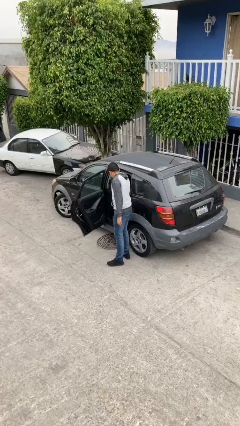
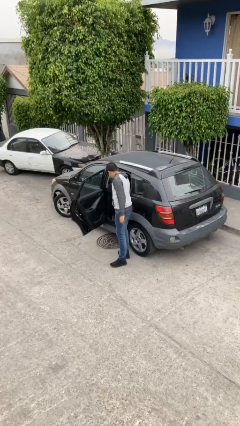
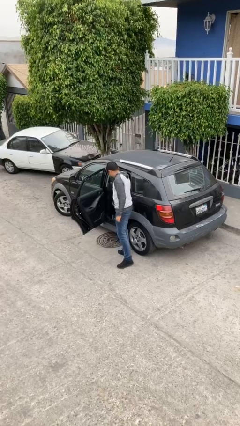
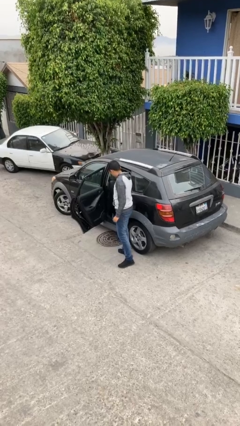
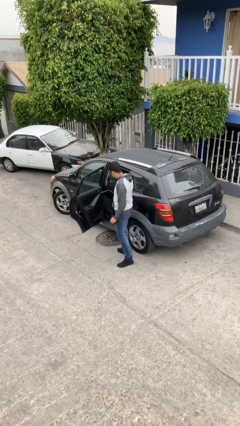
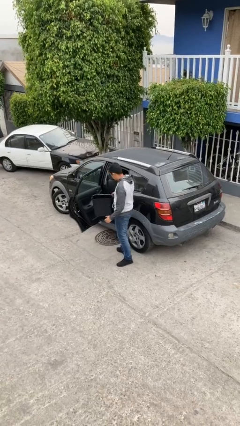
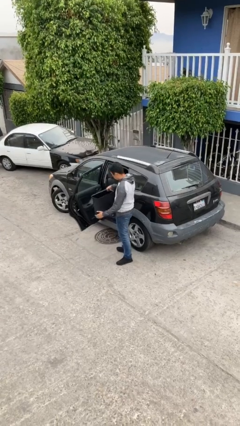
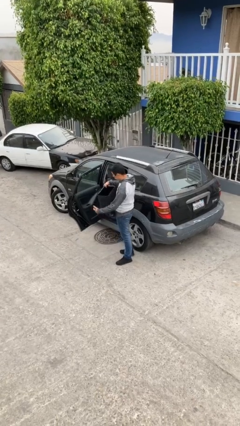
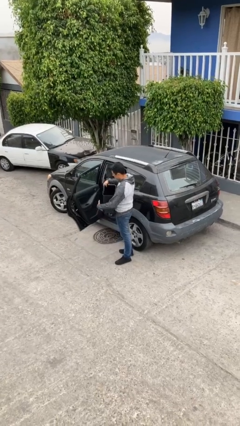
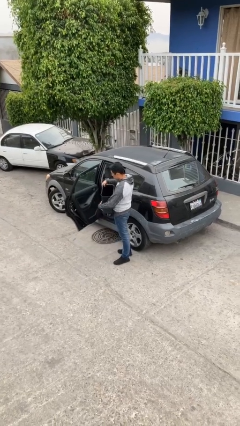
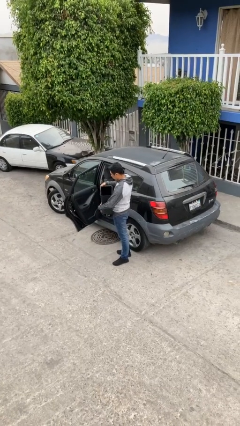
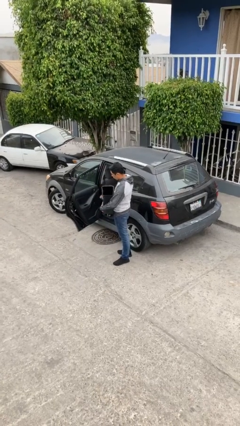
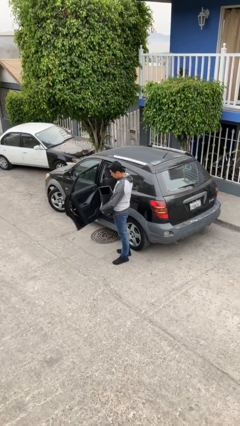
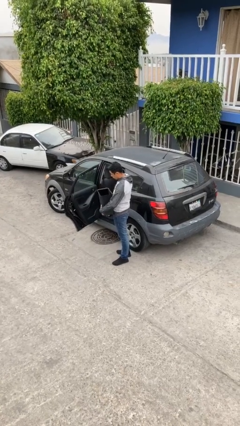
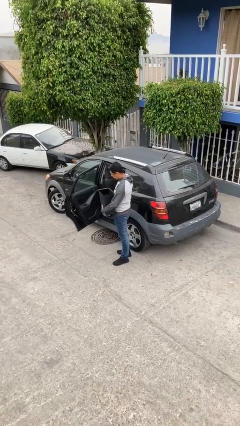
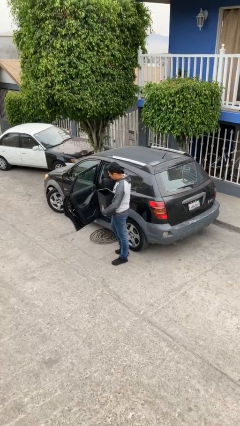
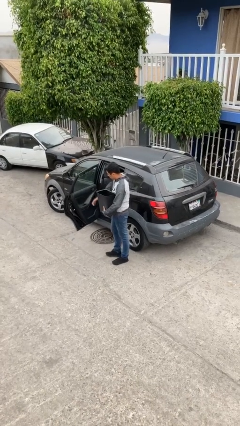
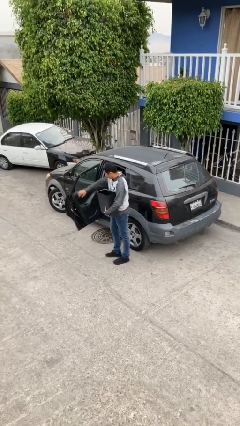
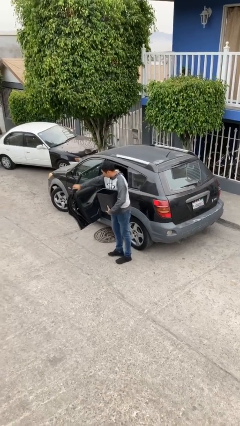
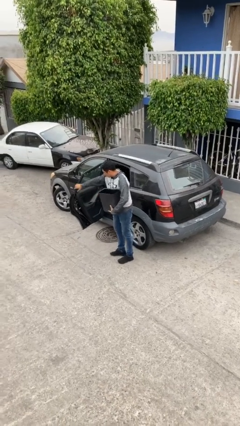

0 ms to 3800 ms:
person unloads car

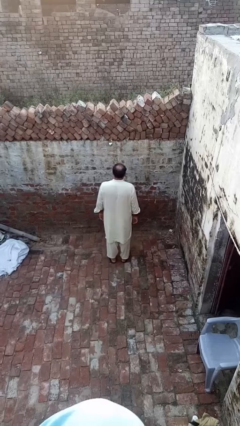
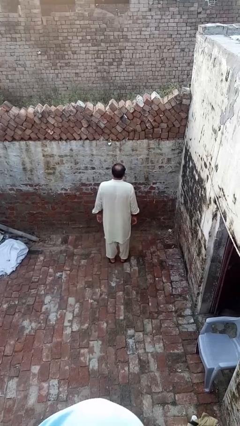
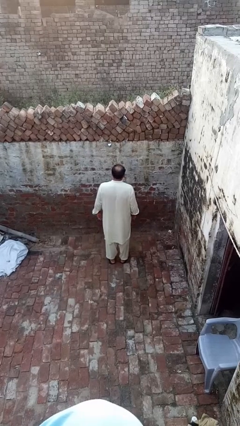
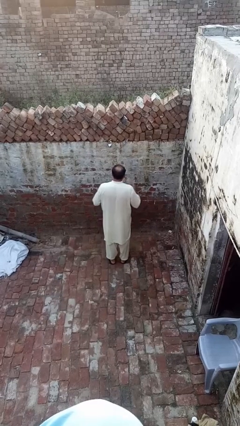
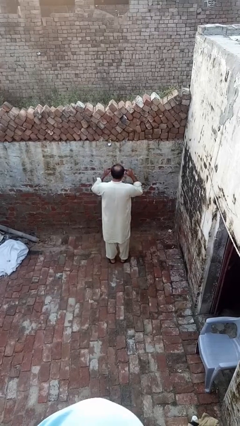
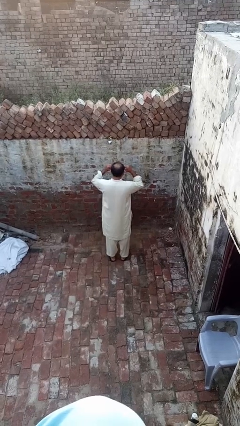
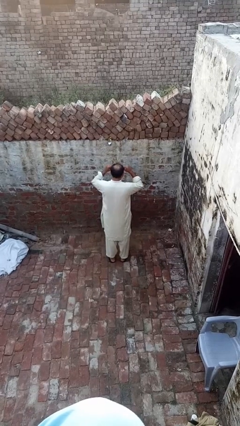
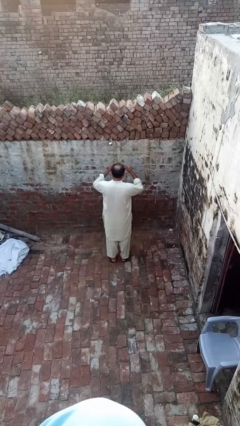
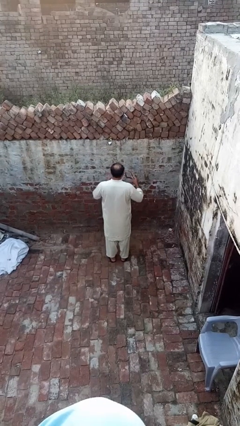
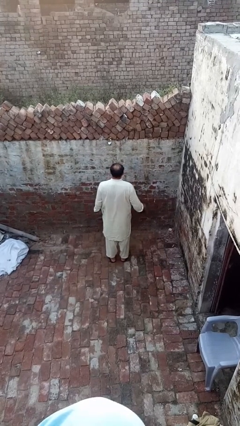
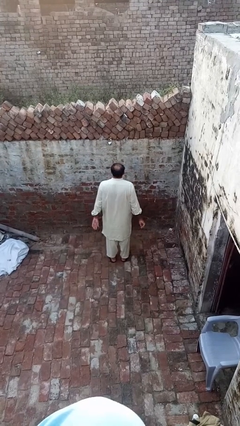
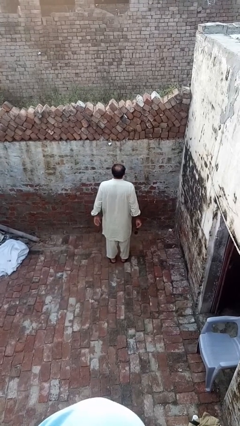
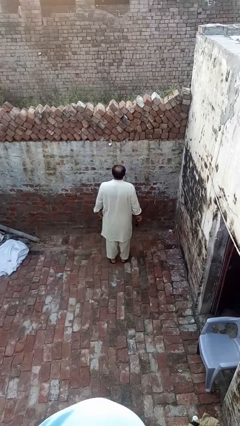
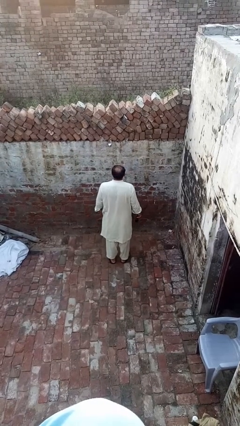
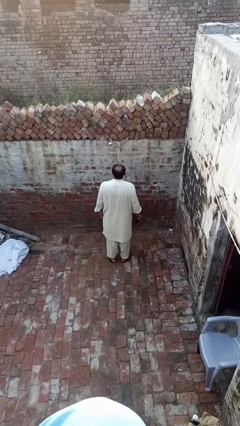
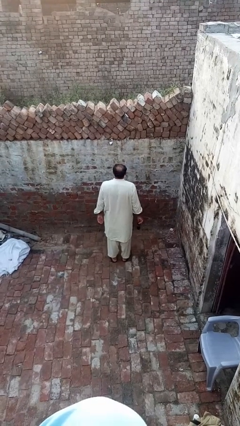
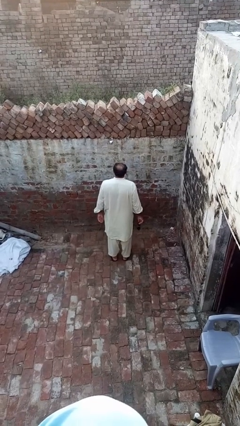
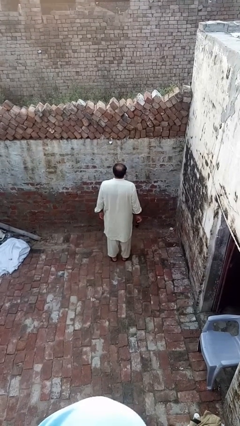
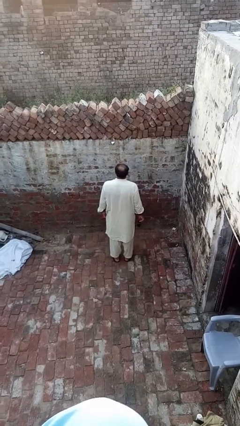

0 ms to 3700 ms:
person takes off sunglasses

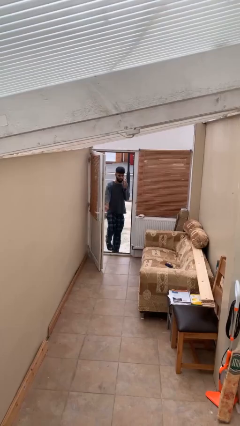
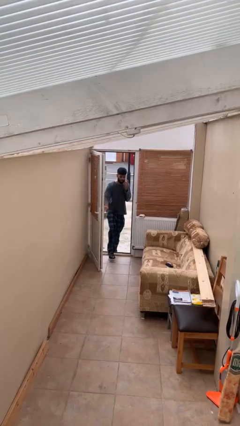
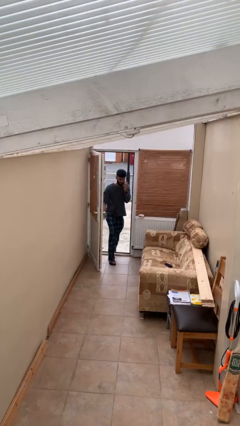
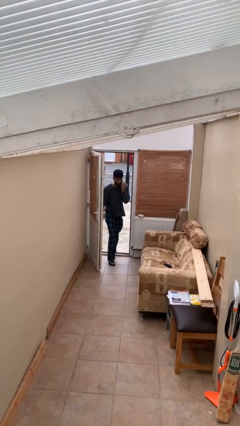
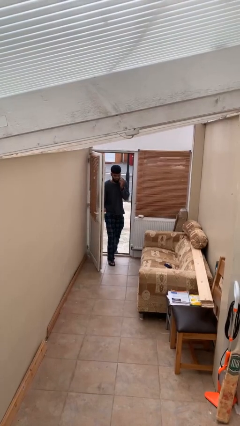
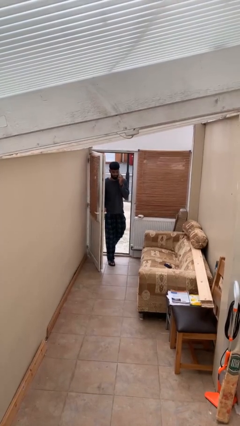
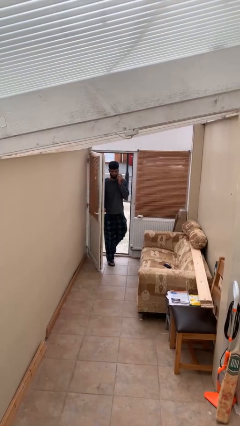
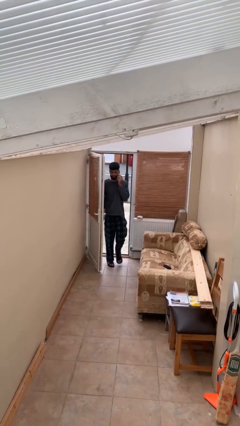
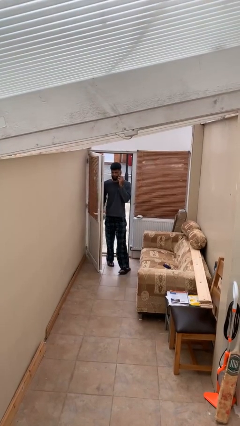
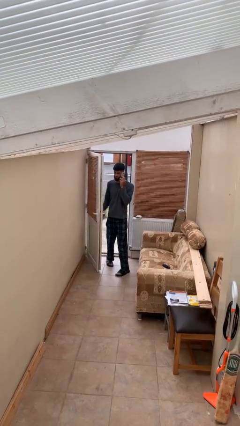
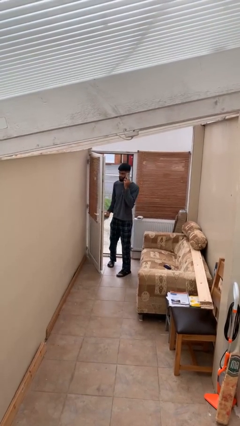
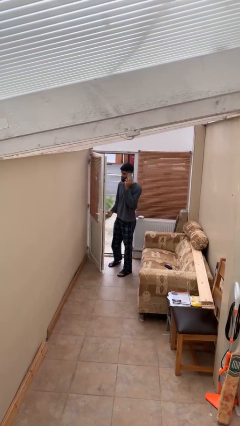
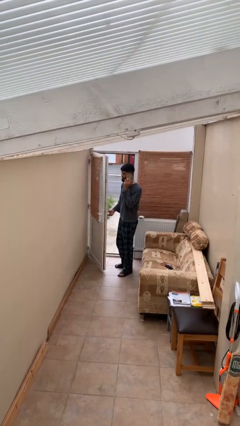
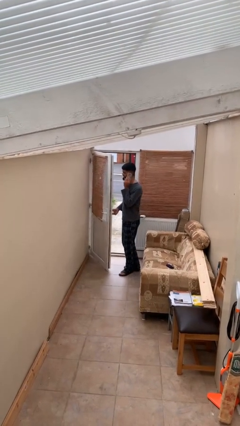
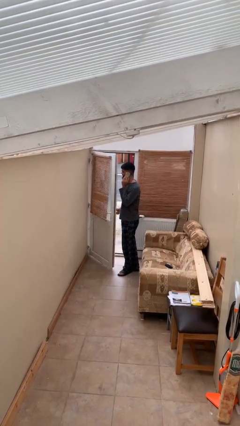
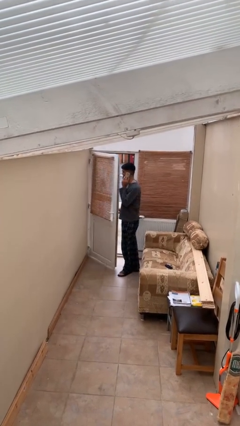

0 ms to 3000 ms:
person enters scene through structure

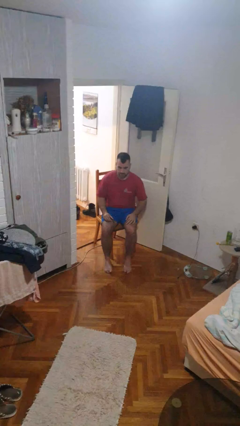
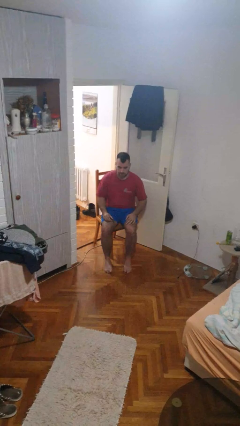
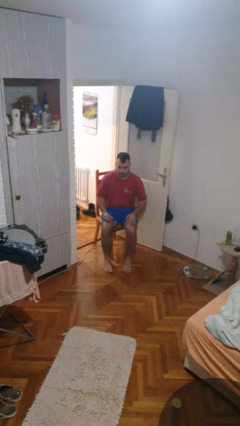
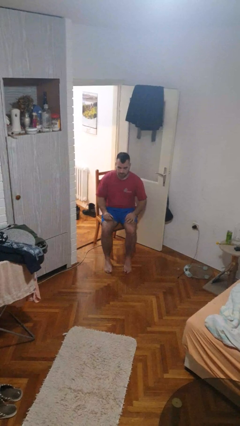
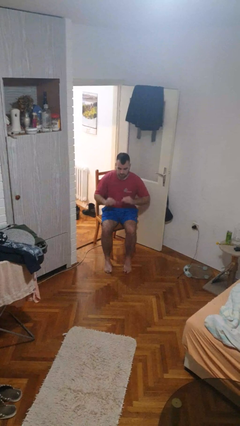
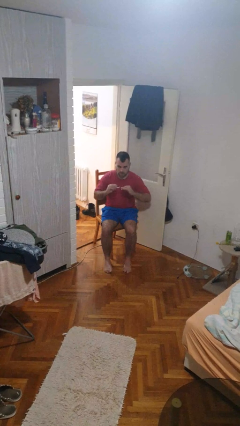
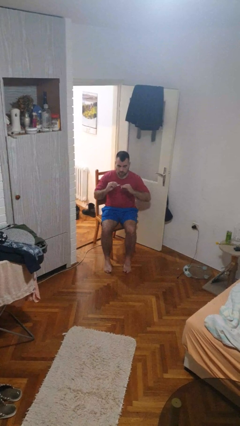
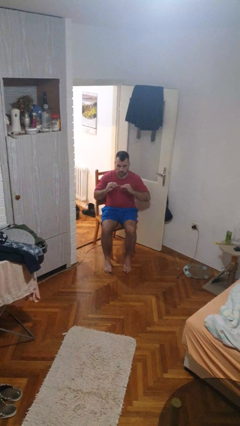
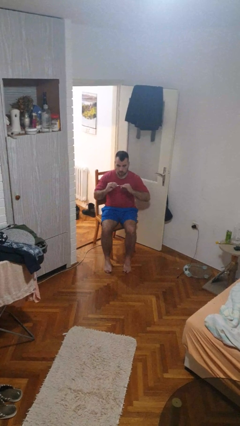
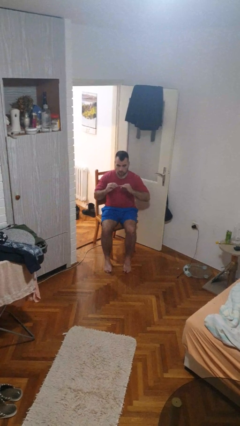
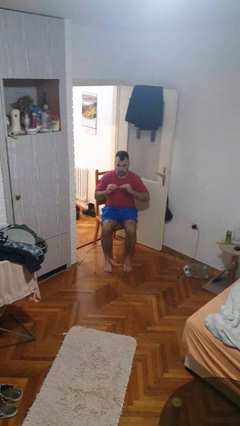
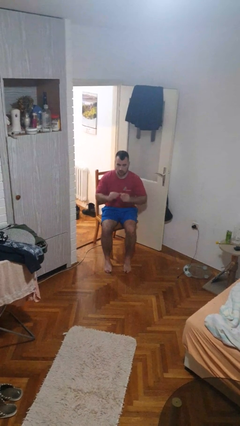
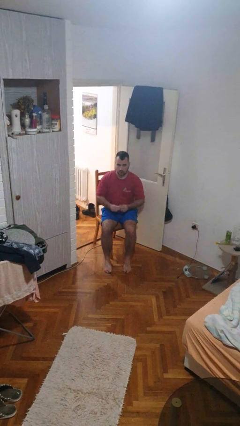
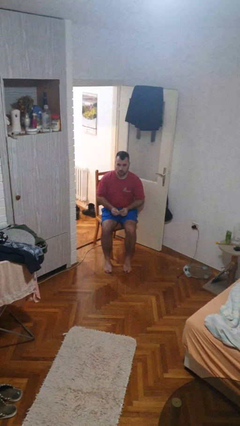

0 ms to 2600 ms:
person clips fingernails

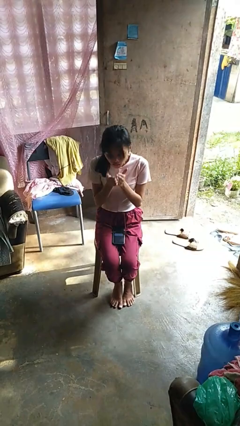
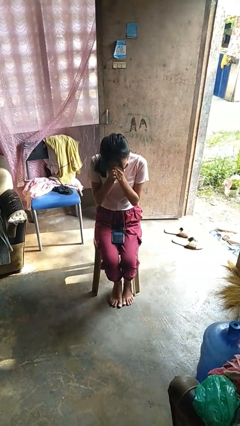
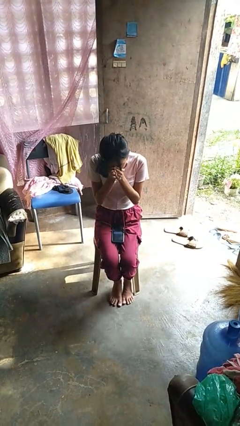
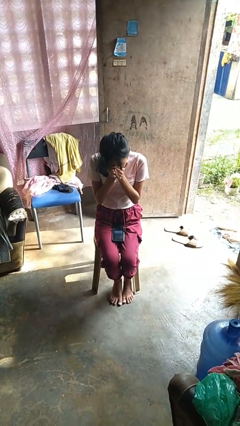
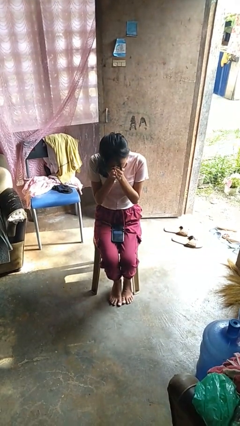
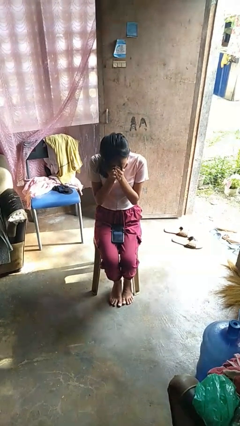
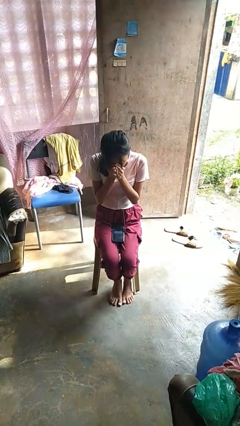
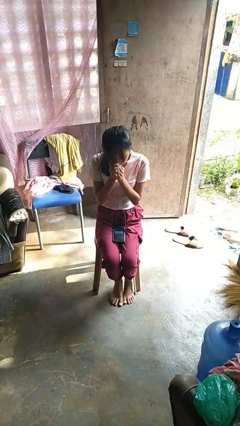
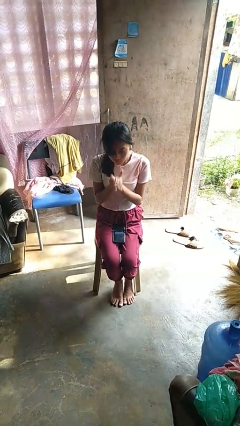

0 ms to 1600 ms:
person sneezes into hand

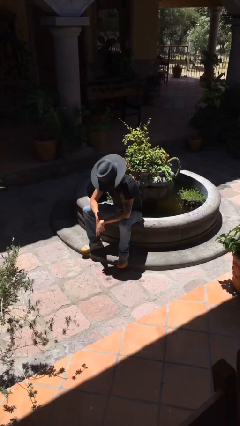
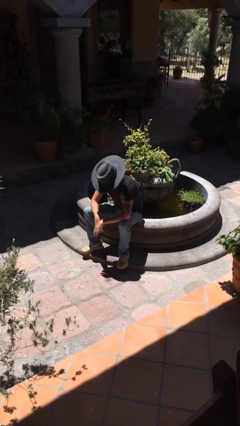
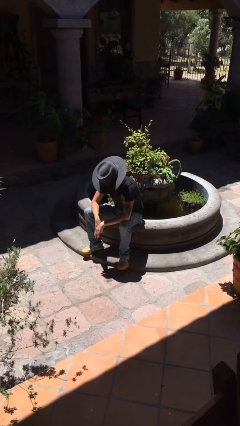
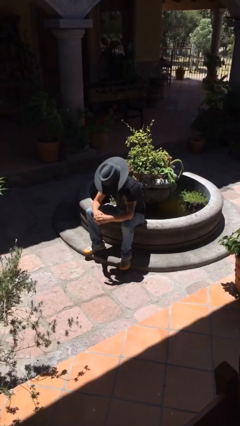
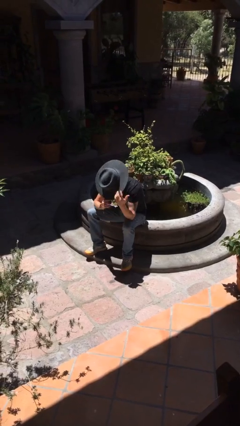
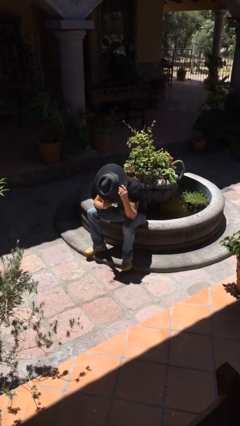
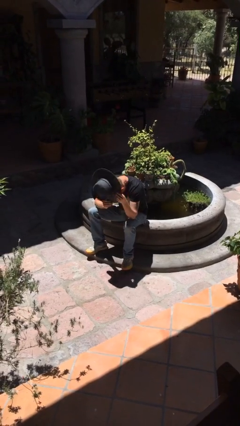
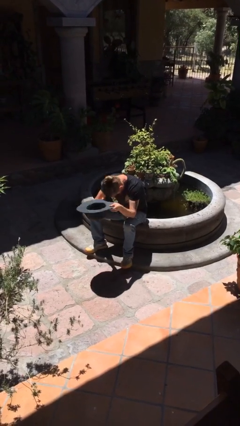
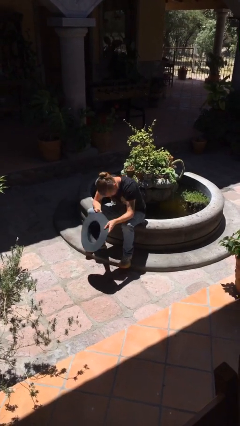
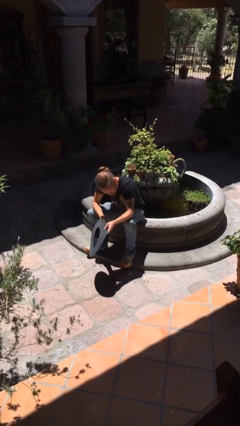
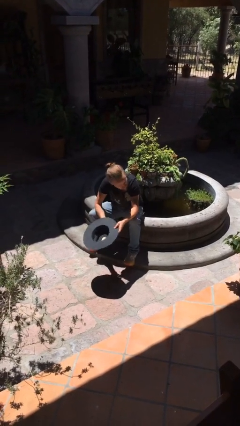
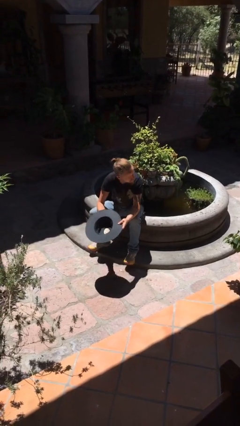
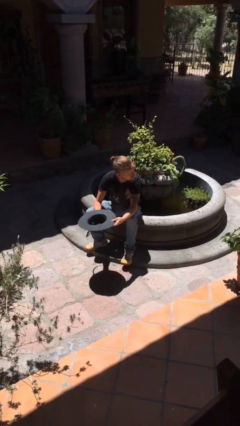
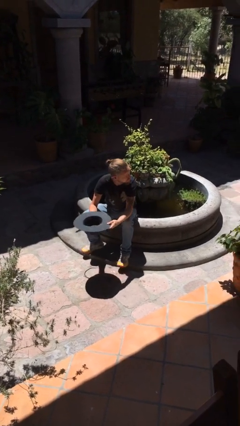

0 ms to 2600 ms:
person takes off hat
